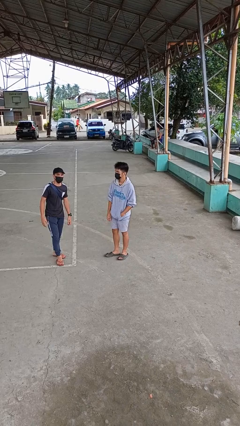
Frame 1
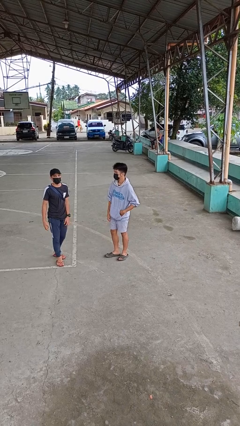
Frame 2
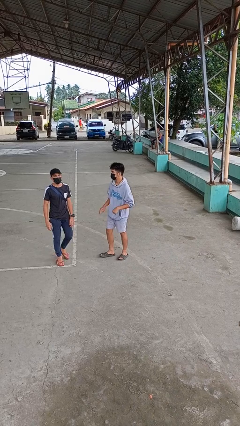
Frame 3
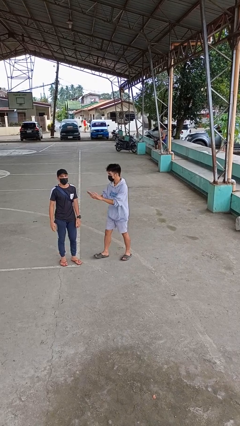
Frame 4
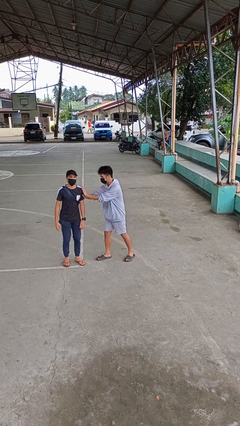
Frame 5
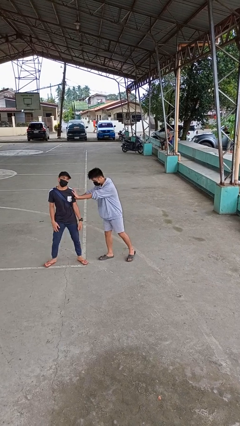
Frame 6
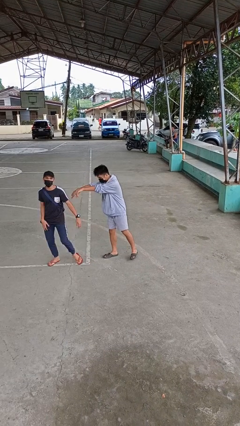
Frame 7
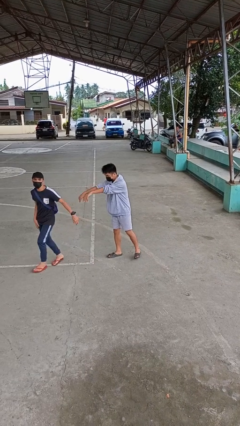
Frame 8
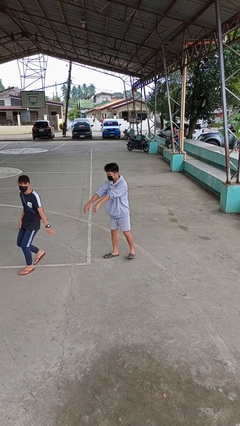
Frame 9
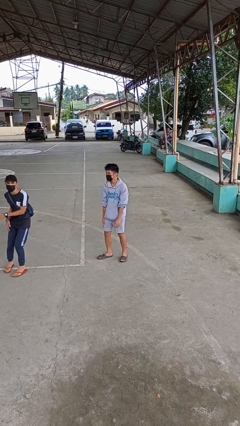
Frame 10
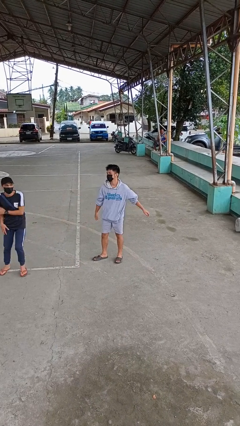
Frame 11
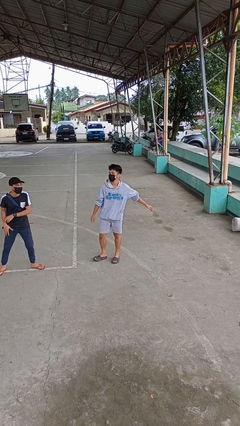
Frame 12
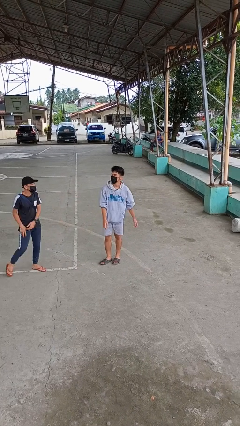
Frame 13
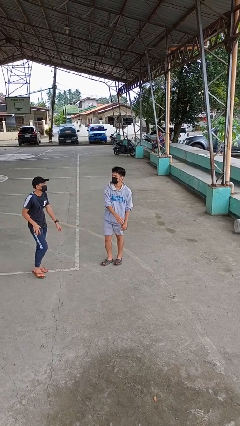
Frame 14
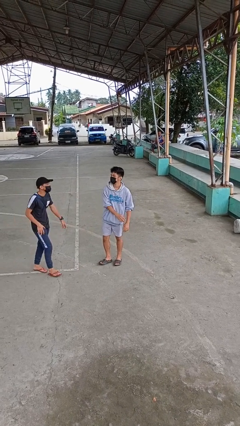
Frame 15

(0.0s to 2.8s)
person shoves person

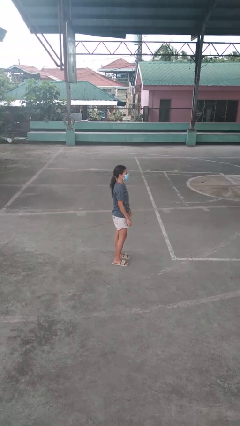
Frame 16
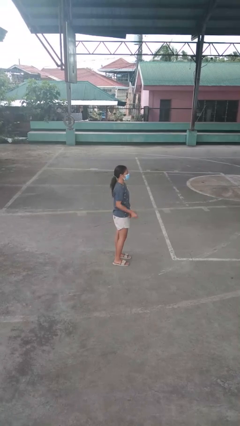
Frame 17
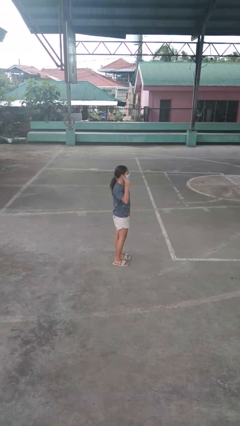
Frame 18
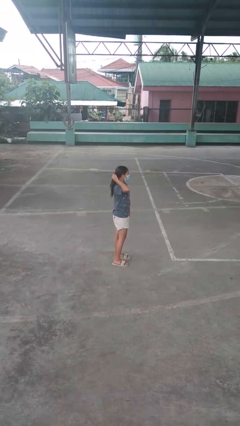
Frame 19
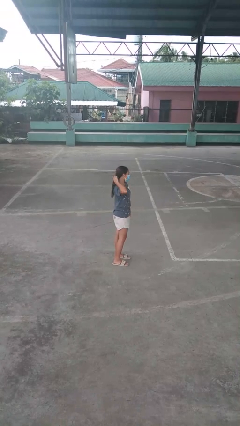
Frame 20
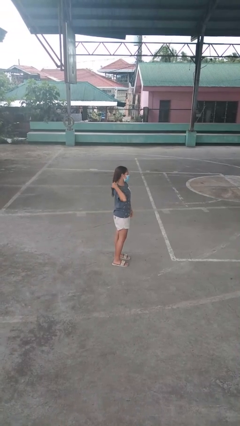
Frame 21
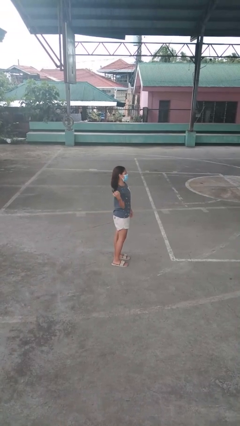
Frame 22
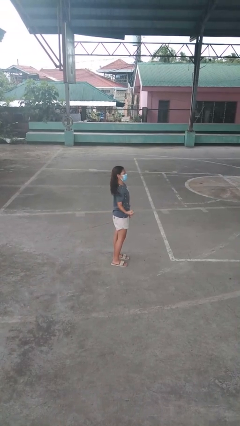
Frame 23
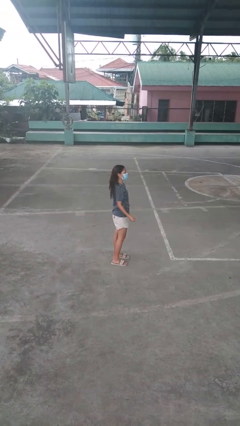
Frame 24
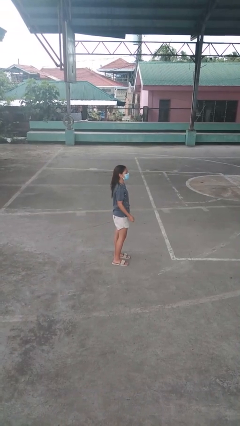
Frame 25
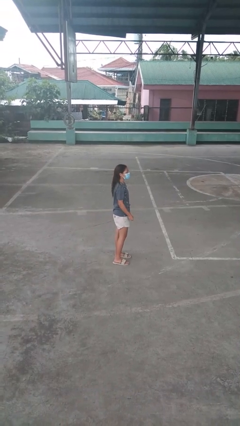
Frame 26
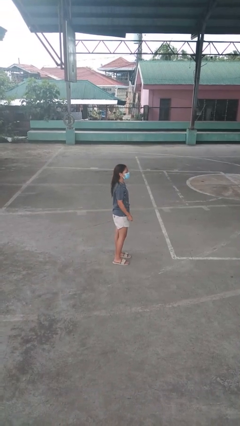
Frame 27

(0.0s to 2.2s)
person takes off hairtie

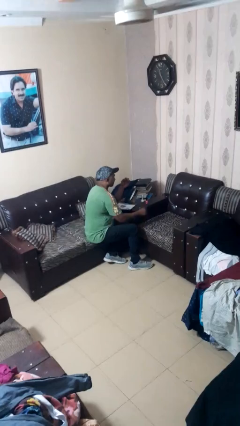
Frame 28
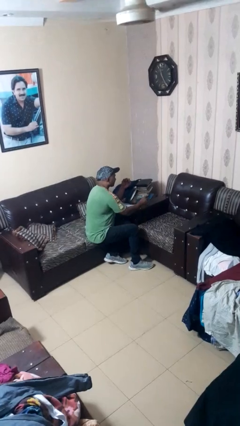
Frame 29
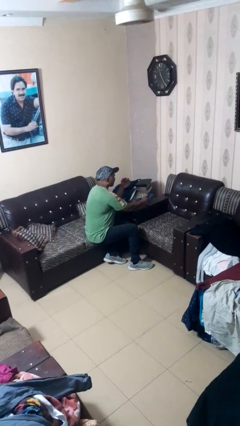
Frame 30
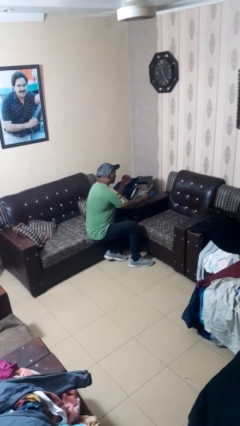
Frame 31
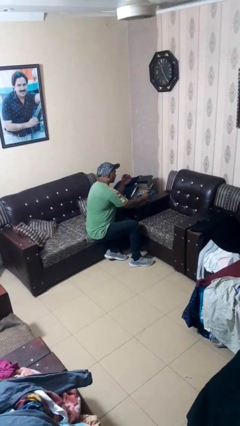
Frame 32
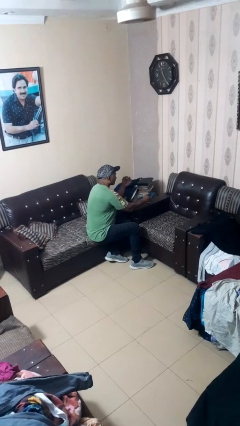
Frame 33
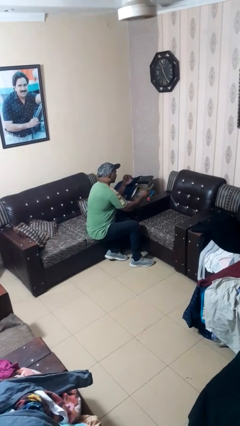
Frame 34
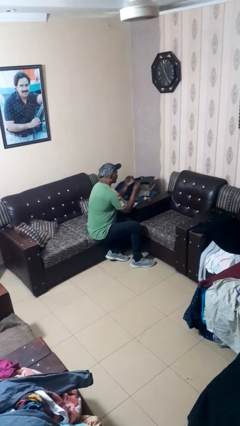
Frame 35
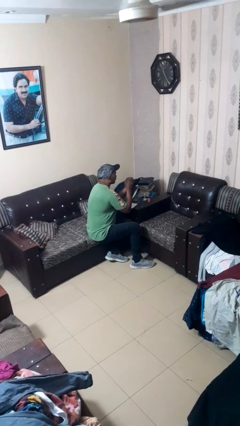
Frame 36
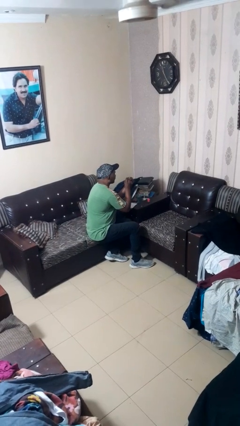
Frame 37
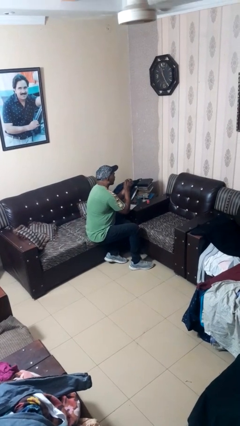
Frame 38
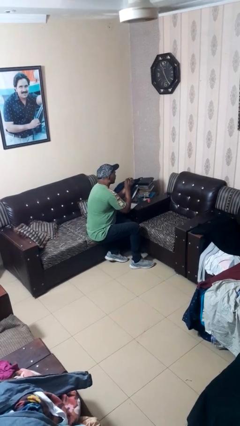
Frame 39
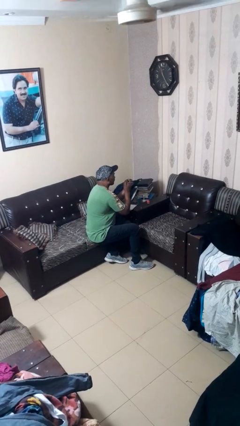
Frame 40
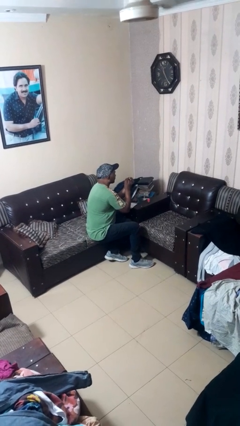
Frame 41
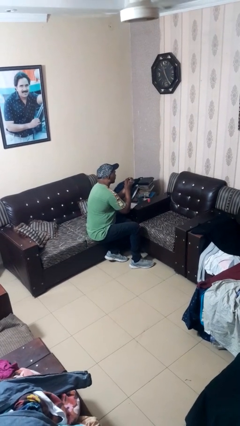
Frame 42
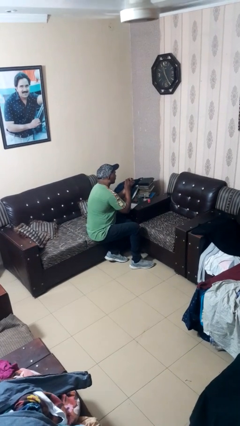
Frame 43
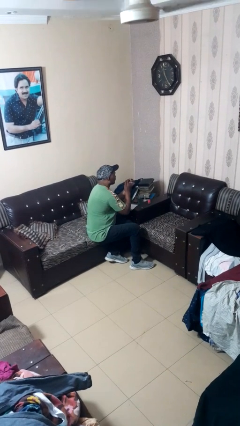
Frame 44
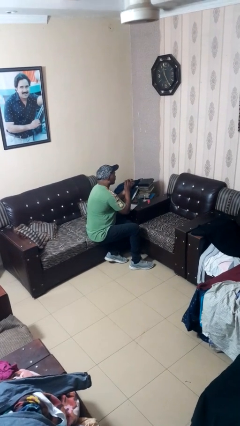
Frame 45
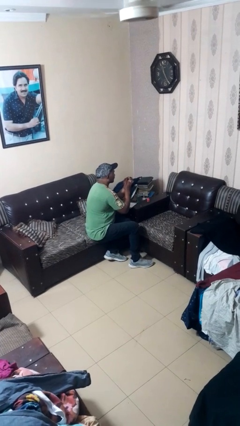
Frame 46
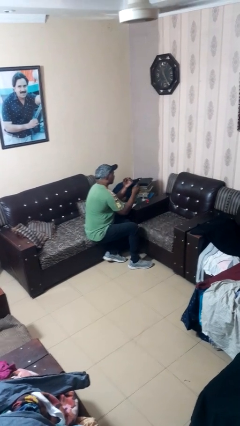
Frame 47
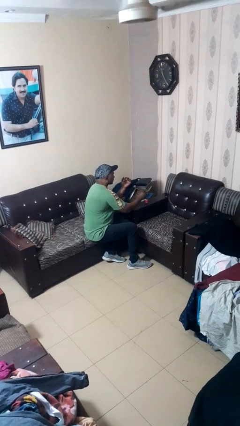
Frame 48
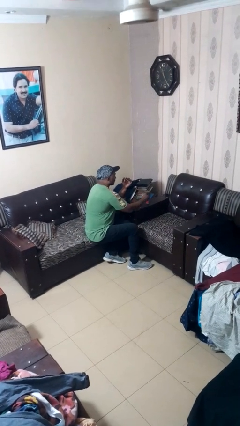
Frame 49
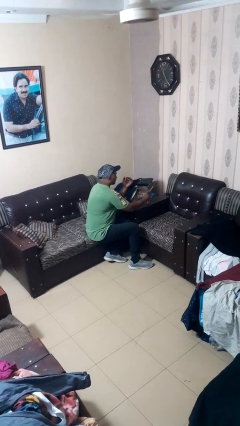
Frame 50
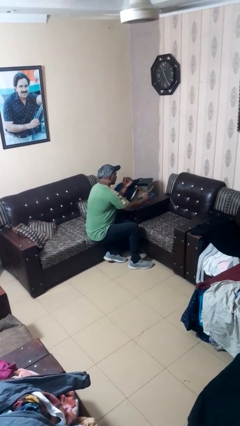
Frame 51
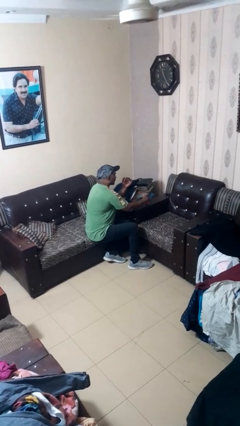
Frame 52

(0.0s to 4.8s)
person paints fingernails

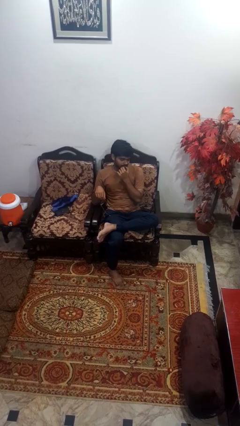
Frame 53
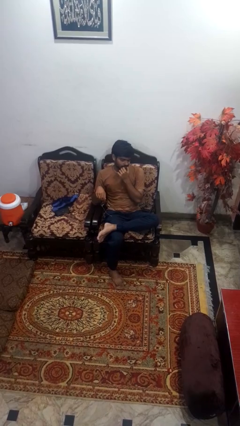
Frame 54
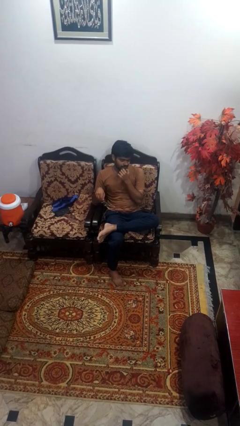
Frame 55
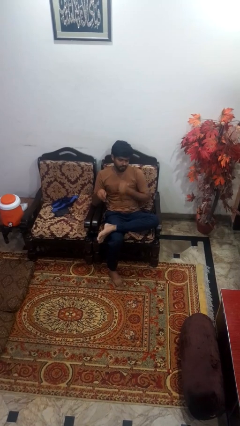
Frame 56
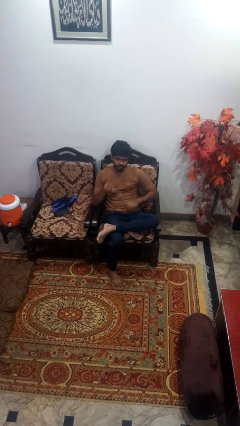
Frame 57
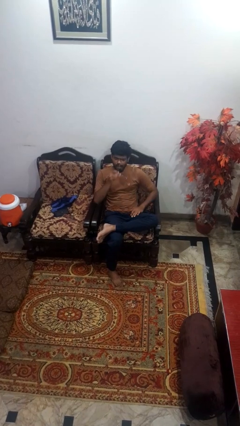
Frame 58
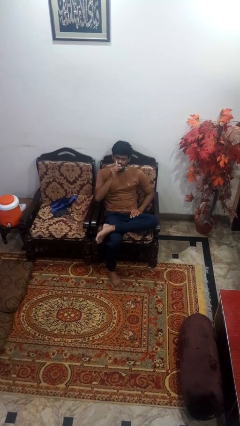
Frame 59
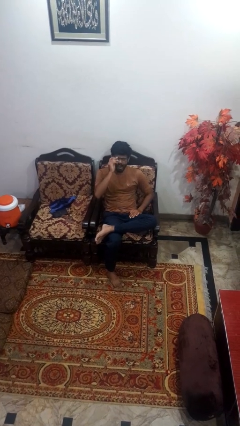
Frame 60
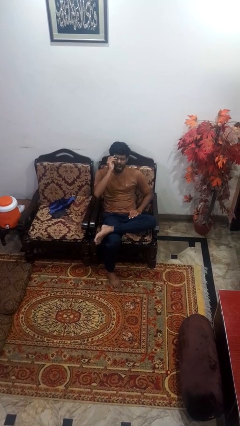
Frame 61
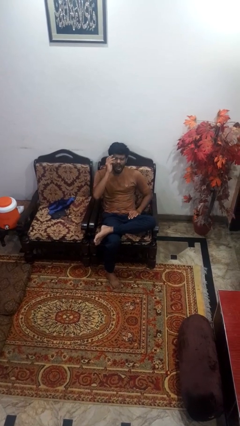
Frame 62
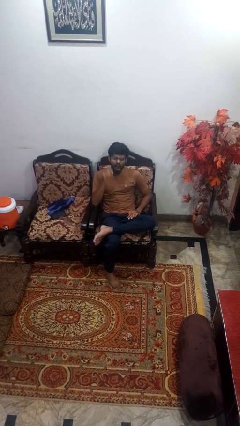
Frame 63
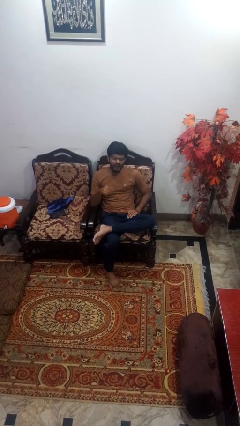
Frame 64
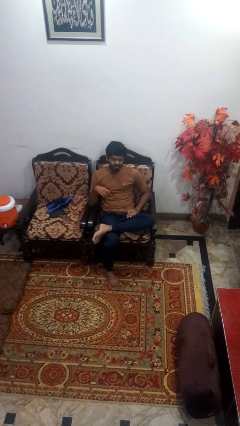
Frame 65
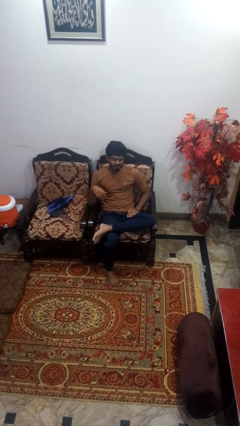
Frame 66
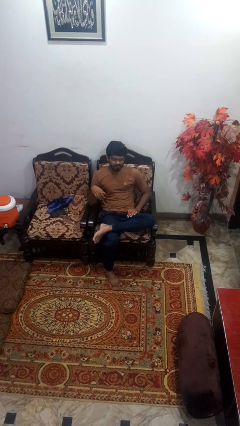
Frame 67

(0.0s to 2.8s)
person puts on glasses

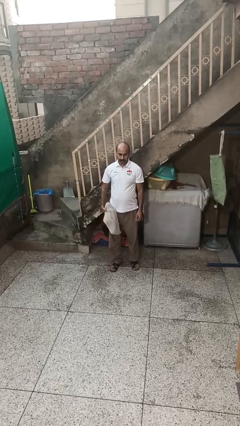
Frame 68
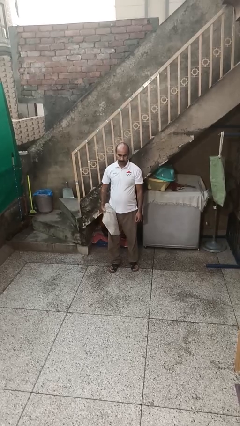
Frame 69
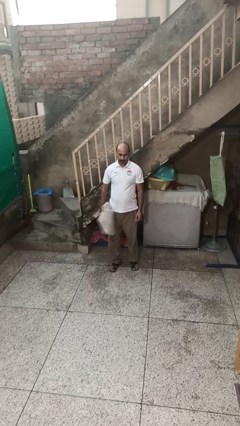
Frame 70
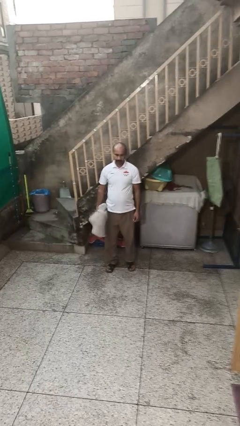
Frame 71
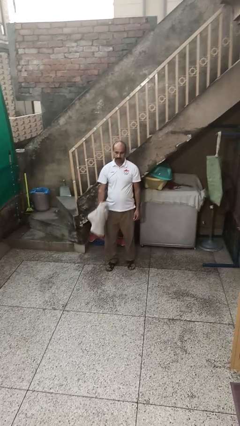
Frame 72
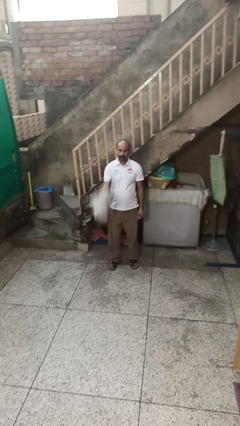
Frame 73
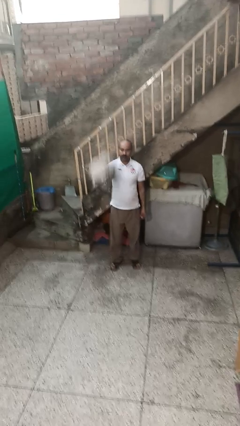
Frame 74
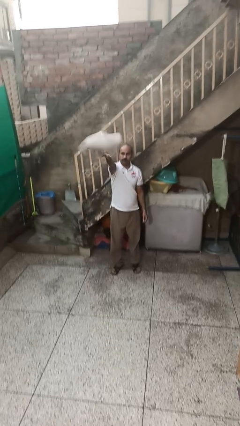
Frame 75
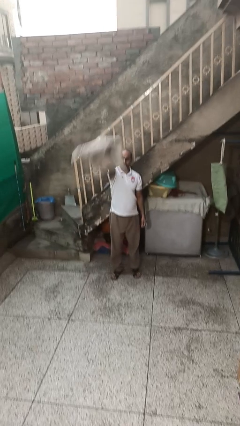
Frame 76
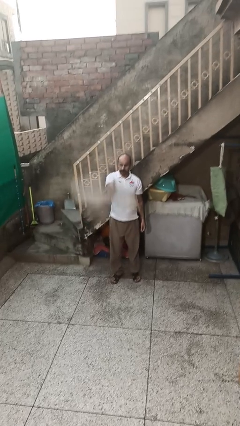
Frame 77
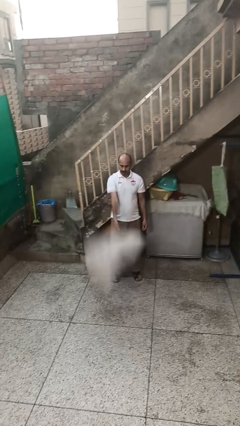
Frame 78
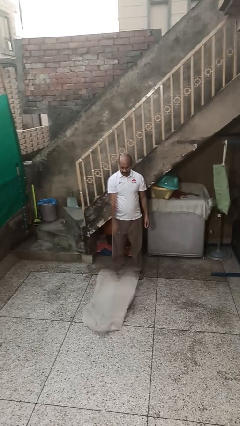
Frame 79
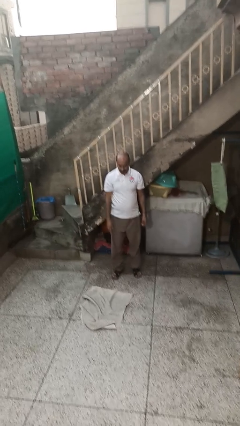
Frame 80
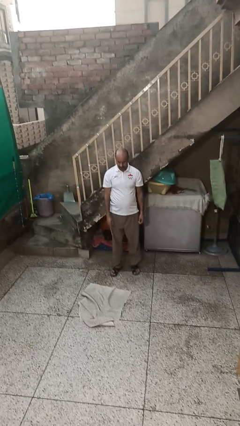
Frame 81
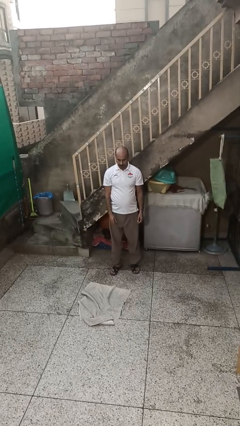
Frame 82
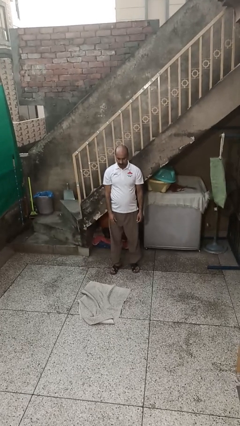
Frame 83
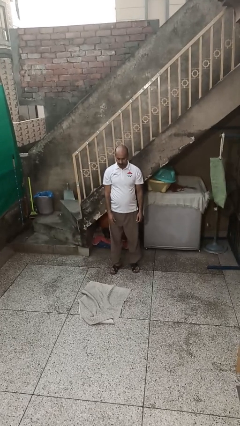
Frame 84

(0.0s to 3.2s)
person throws object into air

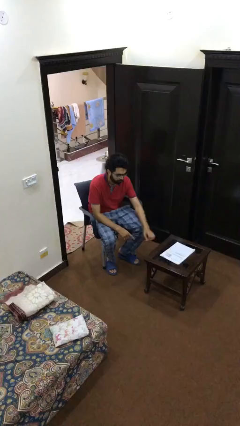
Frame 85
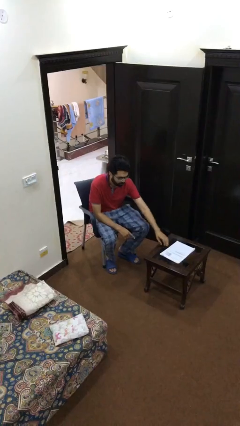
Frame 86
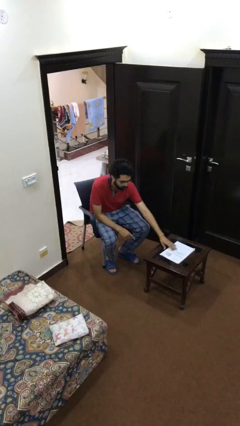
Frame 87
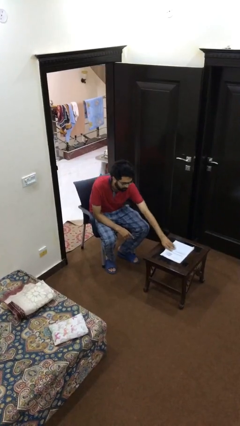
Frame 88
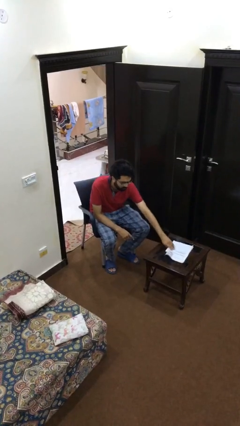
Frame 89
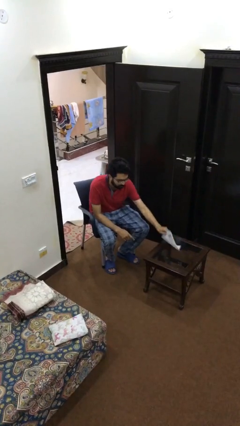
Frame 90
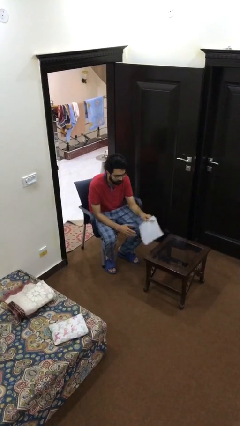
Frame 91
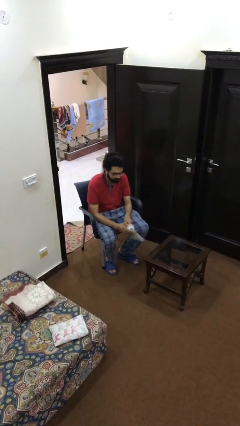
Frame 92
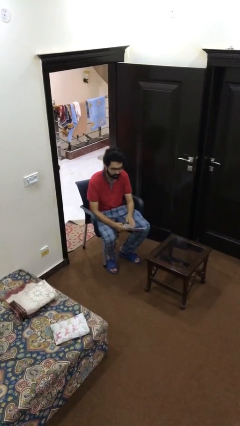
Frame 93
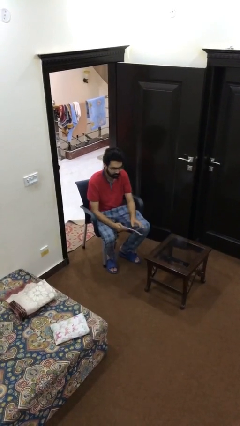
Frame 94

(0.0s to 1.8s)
person picks up object from table
